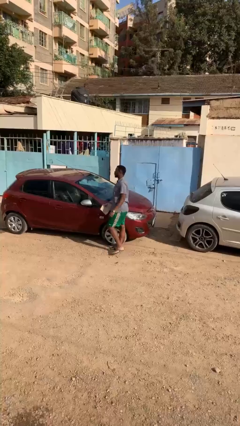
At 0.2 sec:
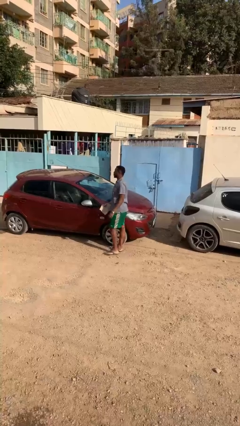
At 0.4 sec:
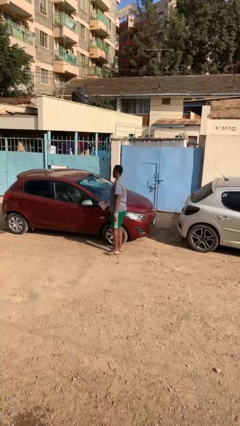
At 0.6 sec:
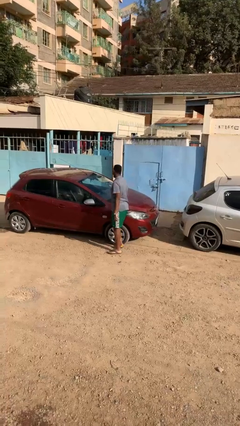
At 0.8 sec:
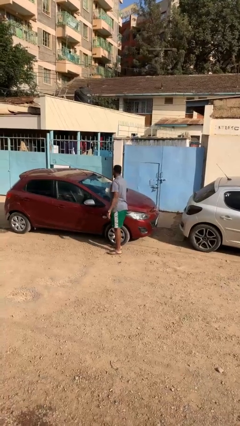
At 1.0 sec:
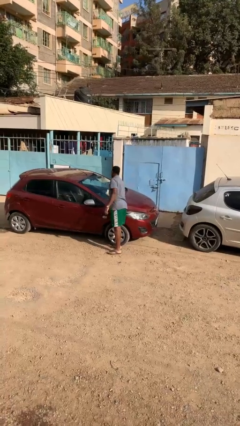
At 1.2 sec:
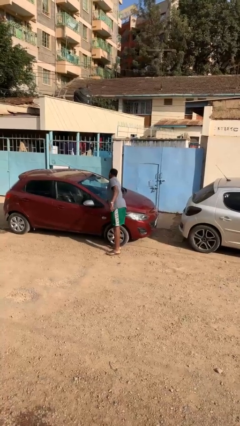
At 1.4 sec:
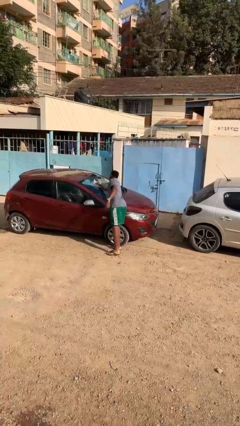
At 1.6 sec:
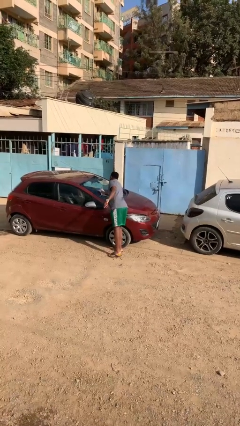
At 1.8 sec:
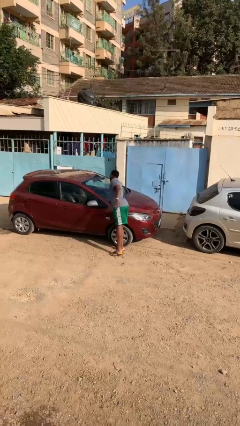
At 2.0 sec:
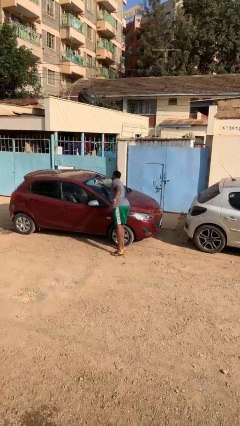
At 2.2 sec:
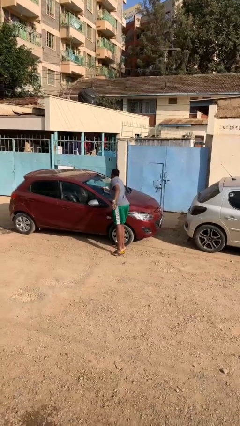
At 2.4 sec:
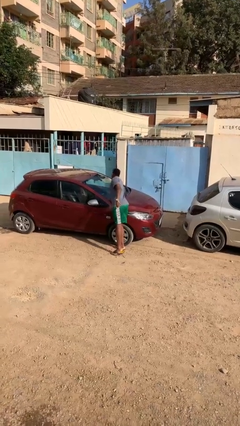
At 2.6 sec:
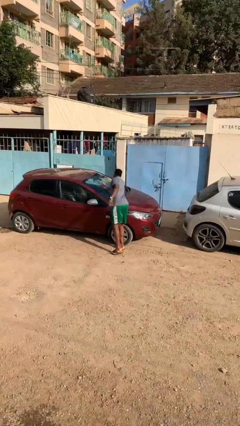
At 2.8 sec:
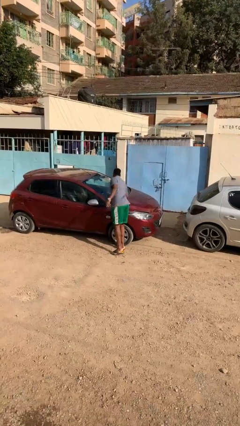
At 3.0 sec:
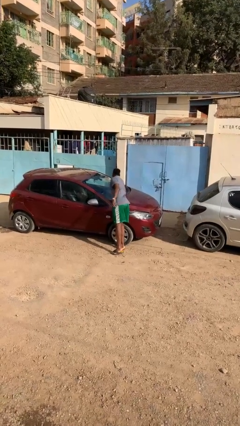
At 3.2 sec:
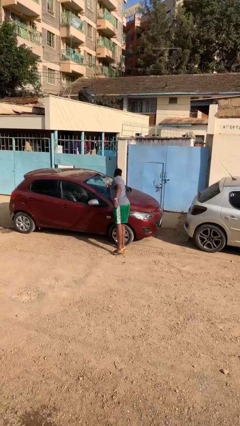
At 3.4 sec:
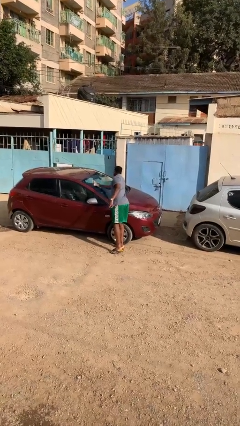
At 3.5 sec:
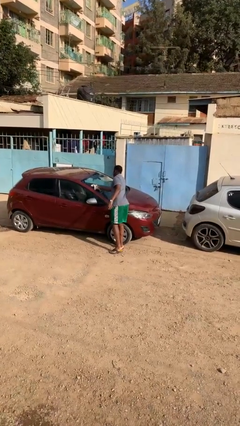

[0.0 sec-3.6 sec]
person polishes car with rag

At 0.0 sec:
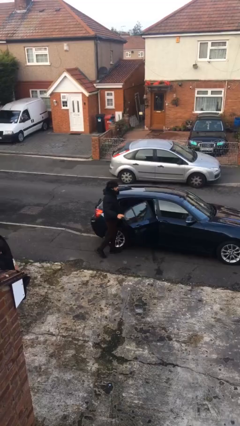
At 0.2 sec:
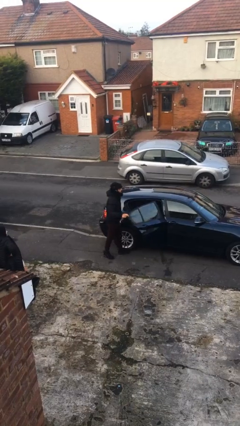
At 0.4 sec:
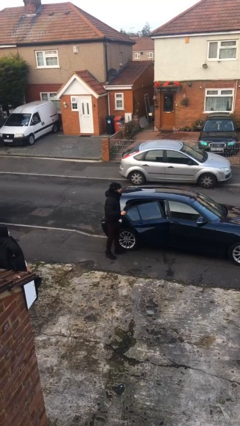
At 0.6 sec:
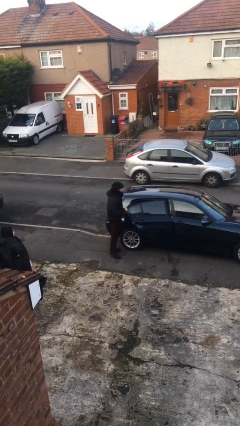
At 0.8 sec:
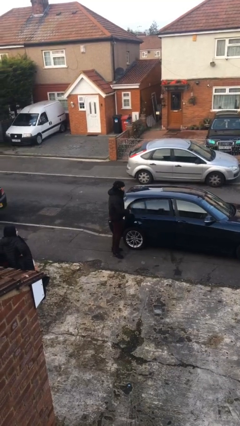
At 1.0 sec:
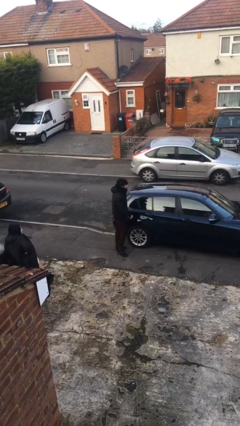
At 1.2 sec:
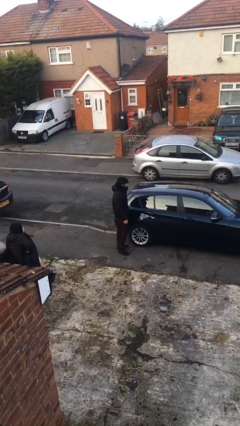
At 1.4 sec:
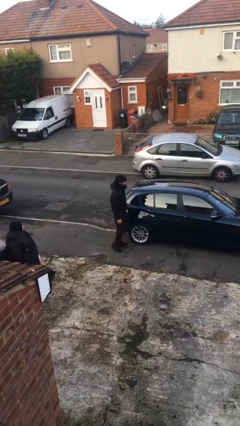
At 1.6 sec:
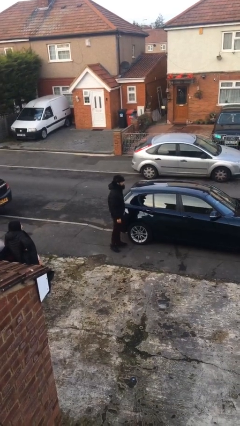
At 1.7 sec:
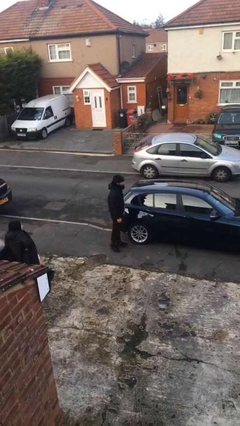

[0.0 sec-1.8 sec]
person closes car door

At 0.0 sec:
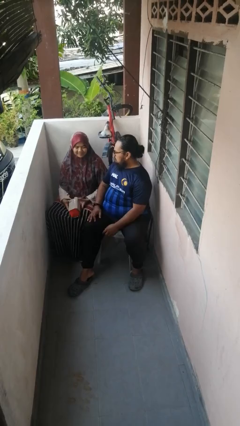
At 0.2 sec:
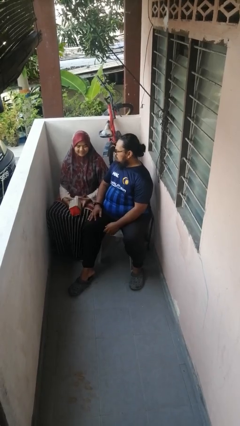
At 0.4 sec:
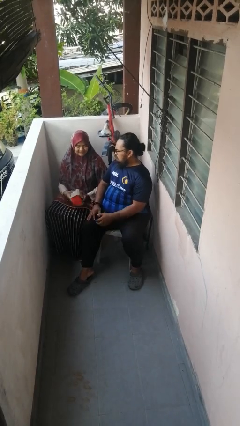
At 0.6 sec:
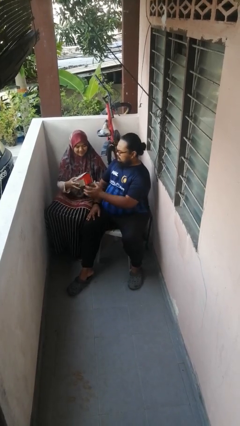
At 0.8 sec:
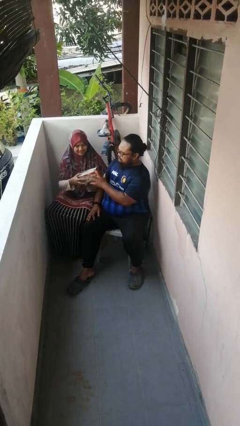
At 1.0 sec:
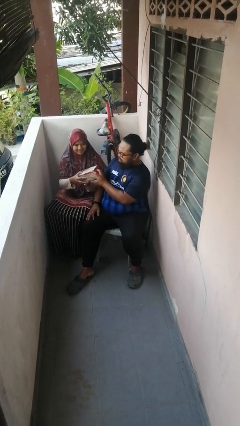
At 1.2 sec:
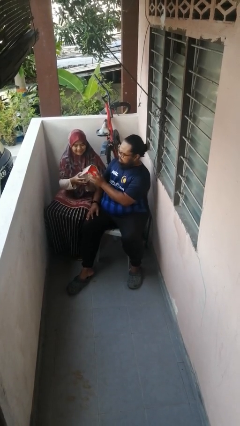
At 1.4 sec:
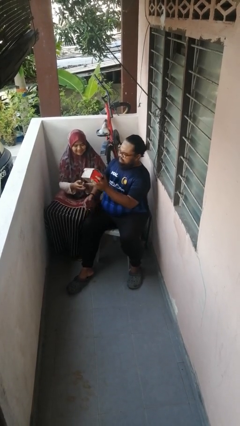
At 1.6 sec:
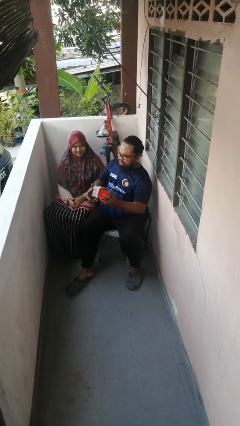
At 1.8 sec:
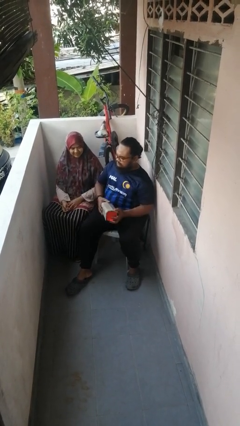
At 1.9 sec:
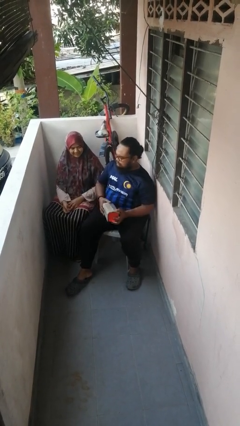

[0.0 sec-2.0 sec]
person transfers object to person

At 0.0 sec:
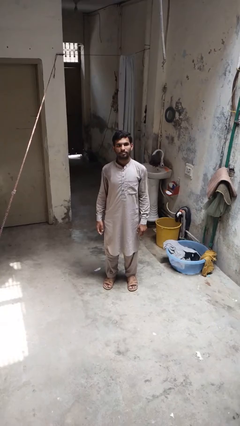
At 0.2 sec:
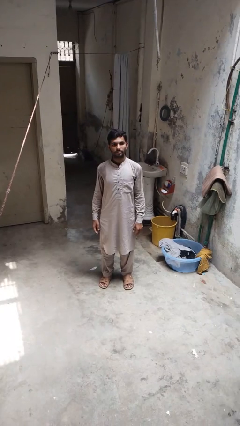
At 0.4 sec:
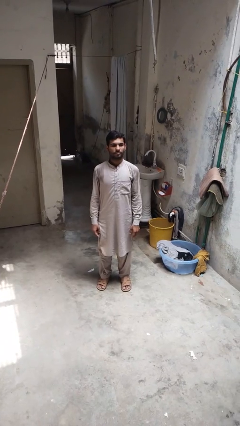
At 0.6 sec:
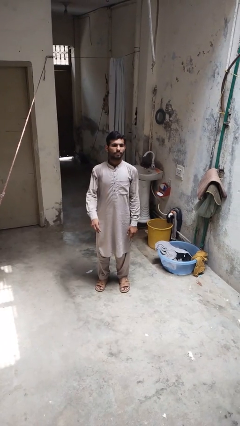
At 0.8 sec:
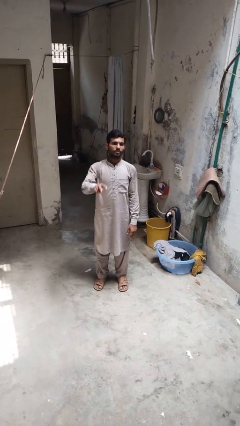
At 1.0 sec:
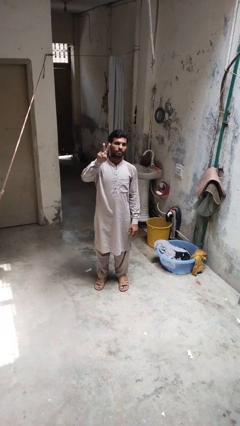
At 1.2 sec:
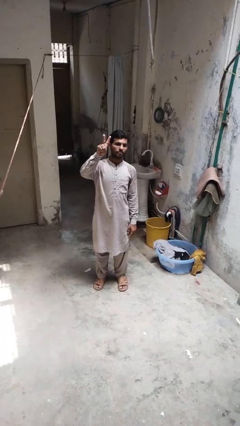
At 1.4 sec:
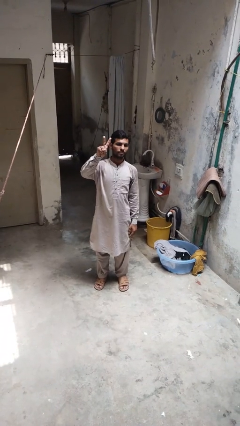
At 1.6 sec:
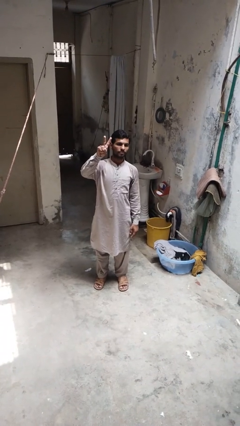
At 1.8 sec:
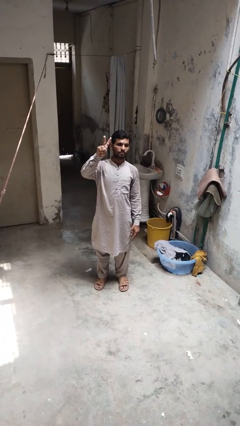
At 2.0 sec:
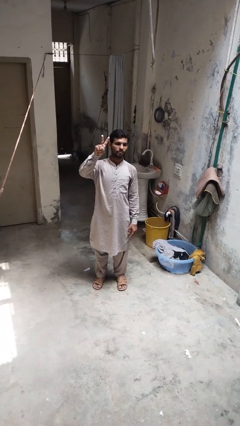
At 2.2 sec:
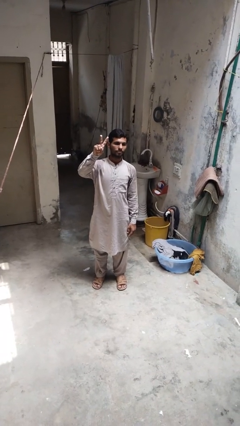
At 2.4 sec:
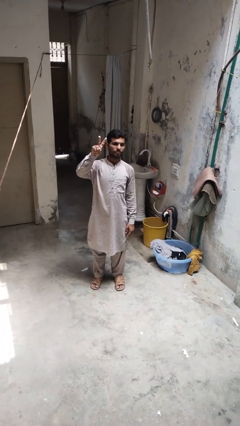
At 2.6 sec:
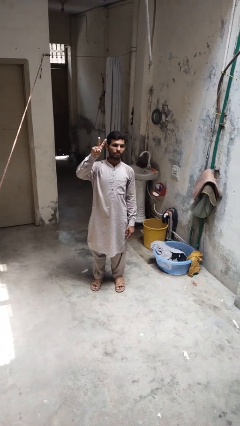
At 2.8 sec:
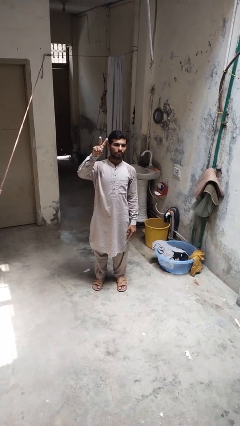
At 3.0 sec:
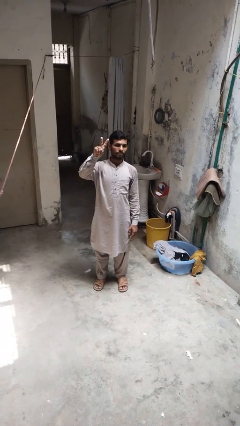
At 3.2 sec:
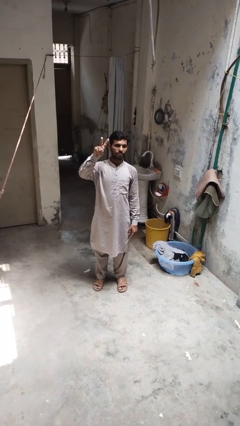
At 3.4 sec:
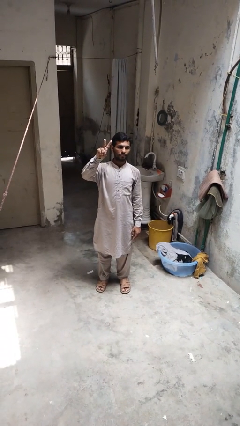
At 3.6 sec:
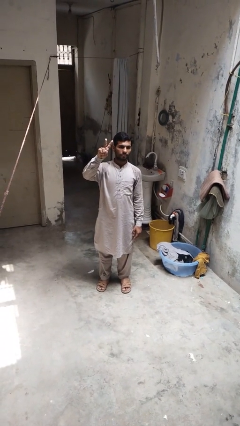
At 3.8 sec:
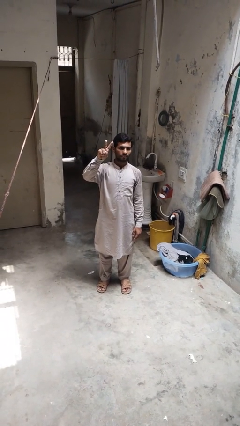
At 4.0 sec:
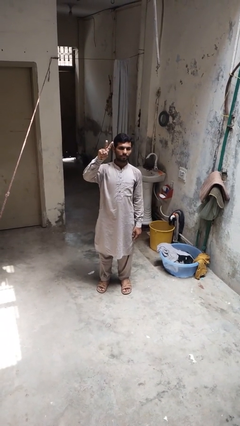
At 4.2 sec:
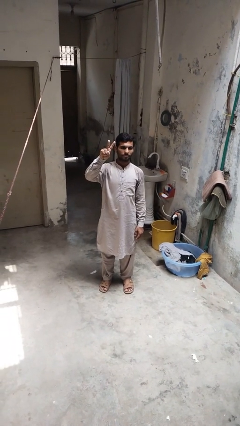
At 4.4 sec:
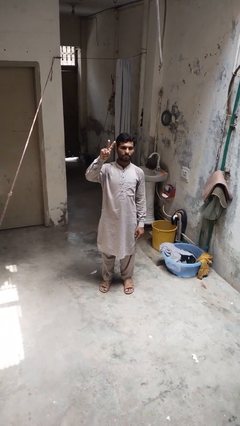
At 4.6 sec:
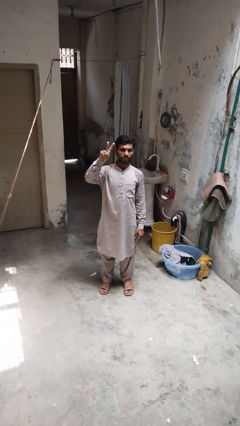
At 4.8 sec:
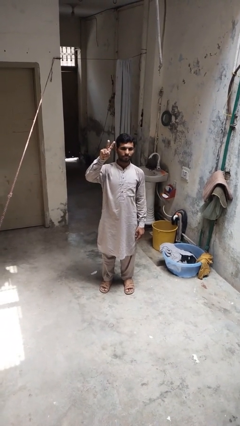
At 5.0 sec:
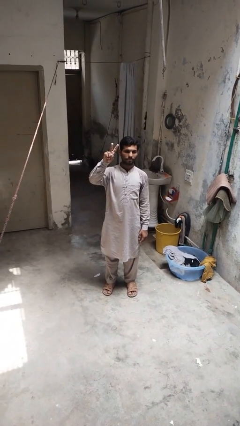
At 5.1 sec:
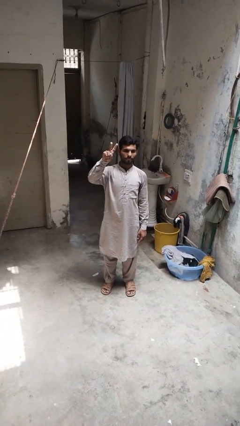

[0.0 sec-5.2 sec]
person gestures peace

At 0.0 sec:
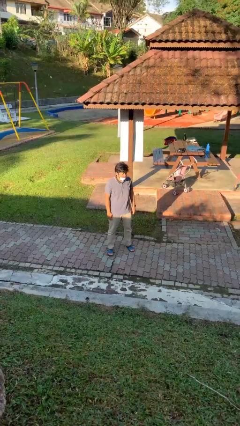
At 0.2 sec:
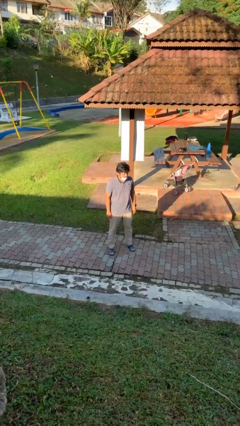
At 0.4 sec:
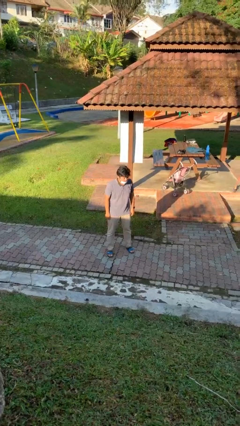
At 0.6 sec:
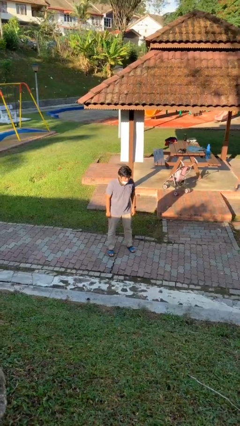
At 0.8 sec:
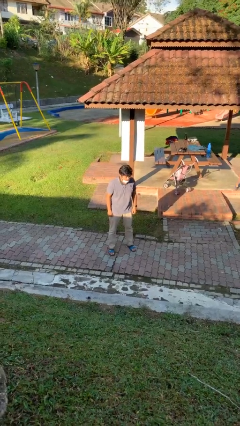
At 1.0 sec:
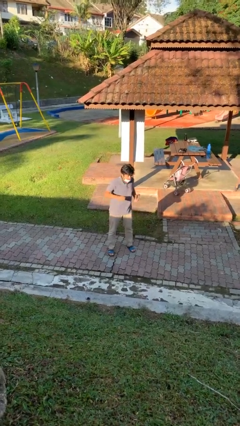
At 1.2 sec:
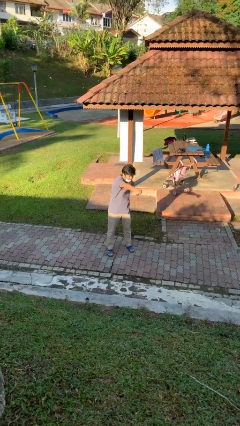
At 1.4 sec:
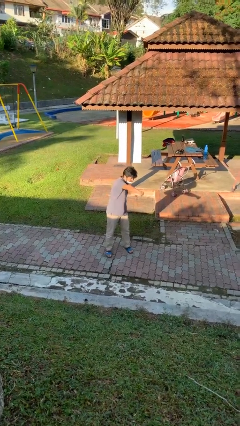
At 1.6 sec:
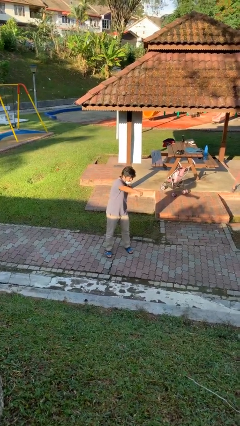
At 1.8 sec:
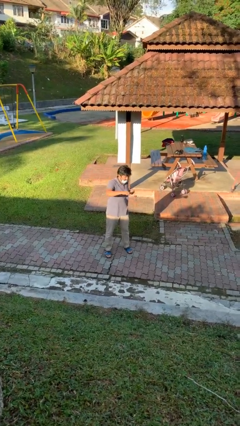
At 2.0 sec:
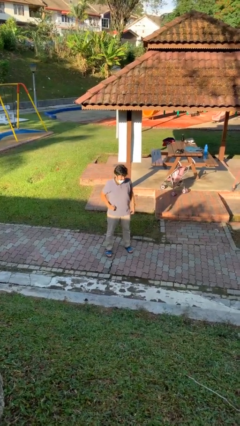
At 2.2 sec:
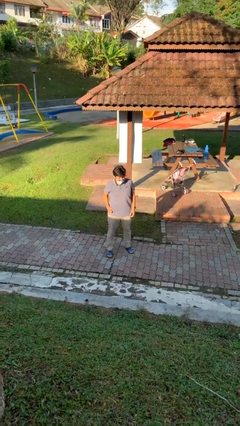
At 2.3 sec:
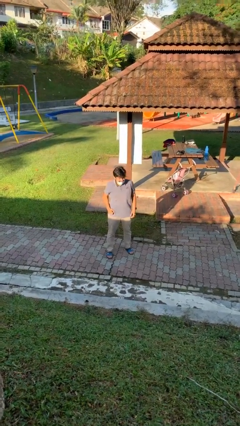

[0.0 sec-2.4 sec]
person punches

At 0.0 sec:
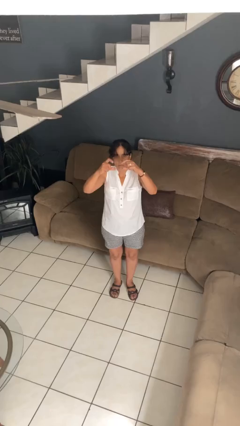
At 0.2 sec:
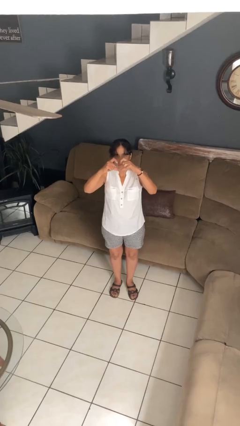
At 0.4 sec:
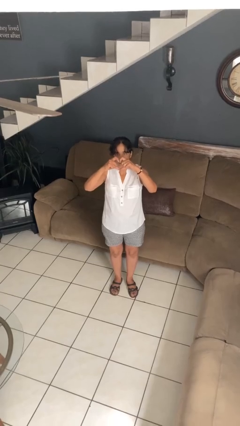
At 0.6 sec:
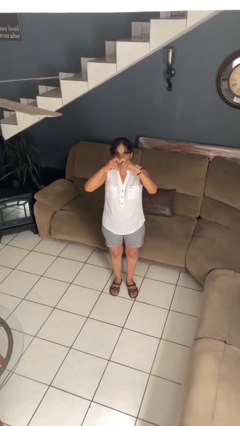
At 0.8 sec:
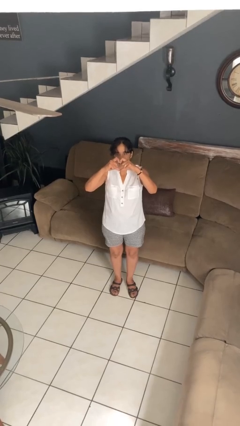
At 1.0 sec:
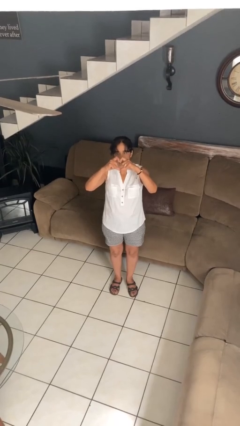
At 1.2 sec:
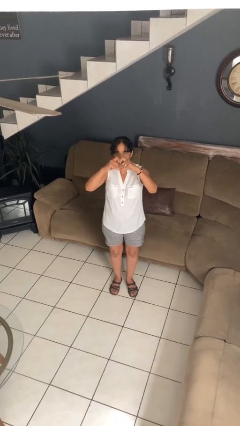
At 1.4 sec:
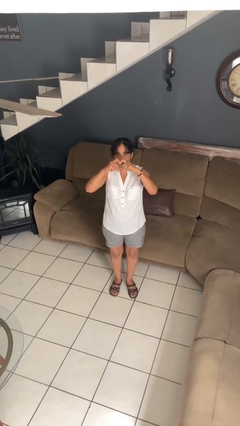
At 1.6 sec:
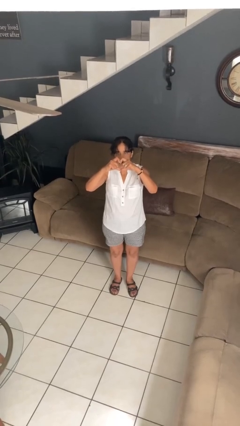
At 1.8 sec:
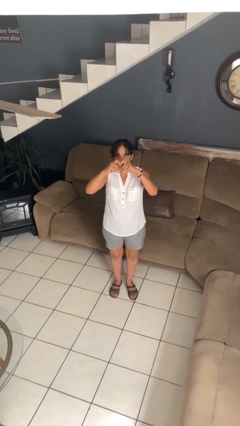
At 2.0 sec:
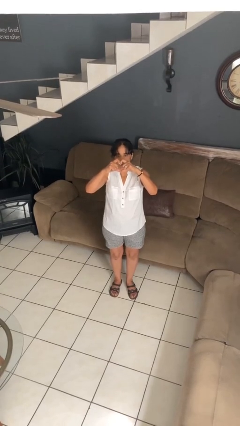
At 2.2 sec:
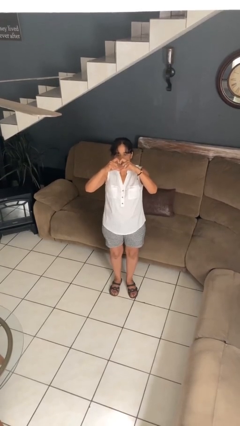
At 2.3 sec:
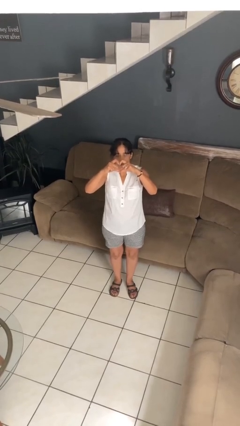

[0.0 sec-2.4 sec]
person gestures heart
